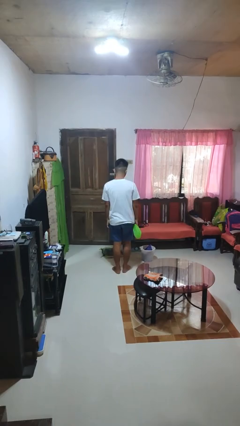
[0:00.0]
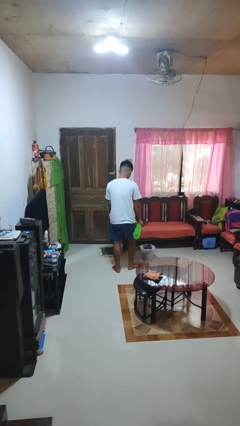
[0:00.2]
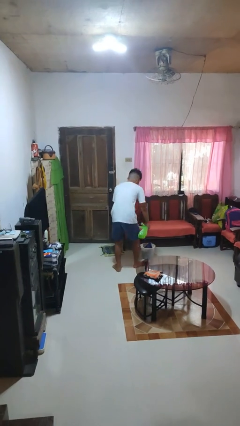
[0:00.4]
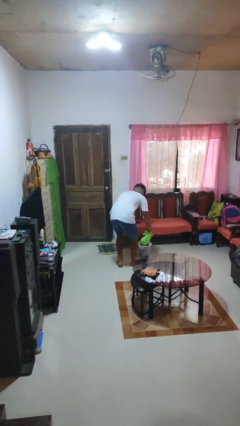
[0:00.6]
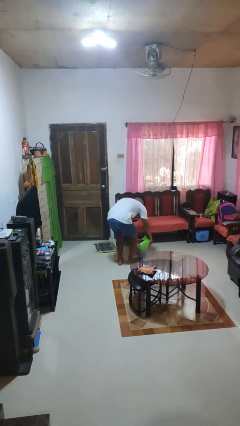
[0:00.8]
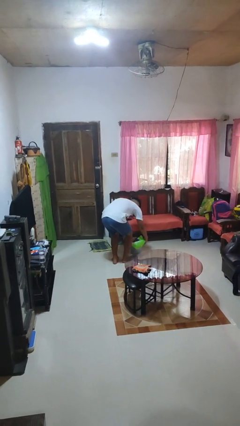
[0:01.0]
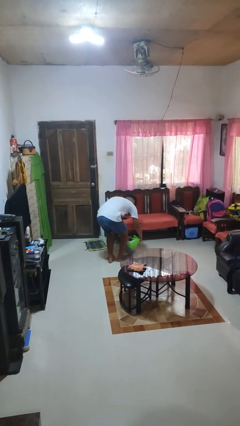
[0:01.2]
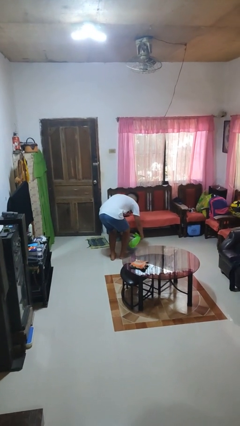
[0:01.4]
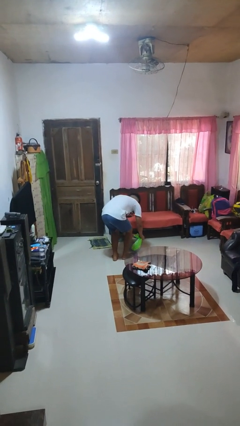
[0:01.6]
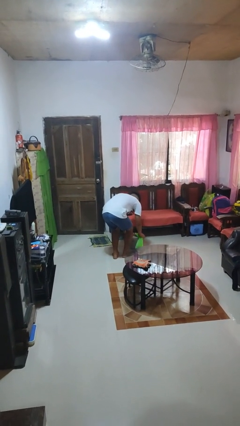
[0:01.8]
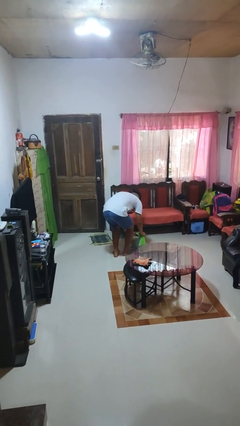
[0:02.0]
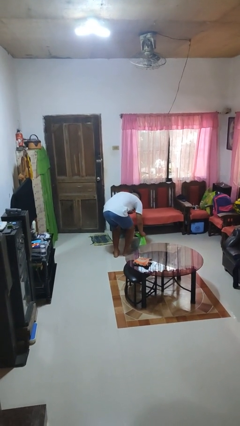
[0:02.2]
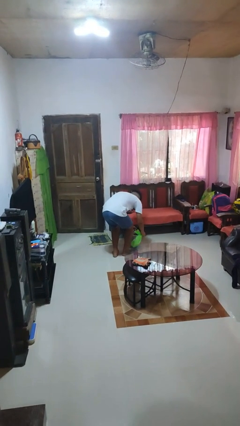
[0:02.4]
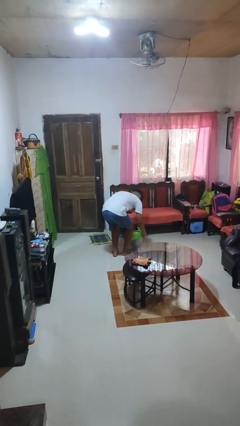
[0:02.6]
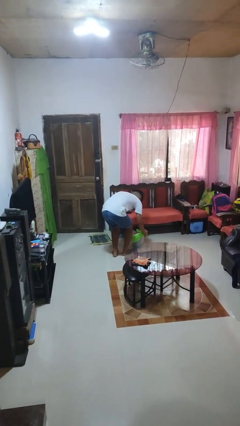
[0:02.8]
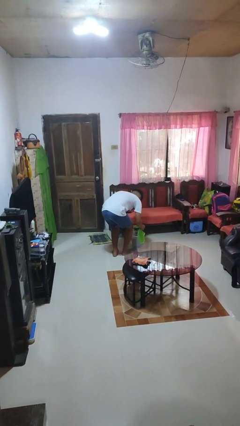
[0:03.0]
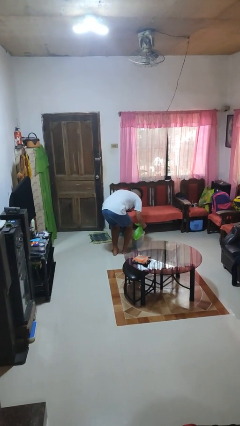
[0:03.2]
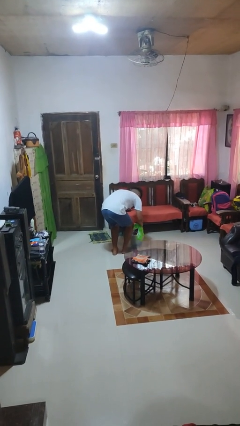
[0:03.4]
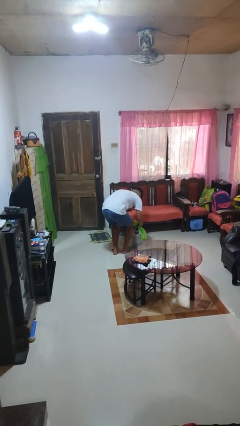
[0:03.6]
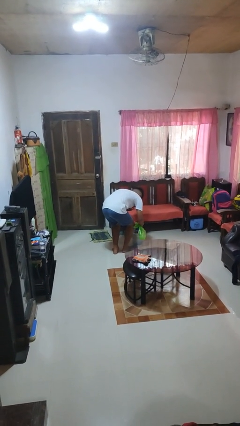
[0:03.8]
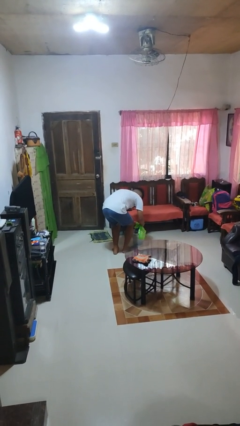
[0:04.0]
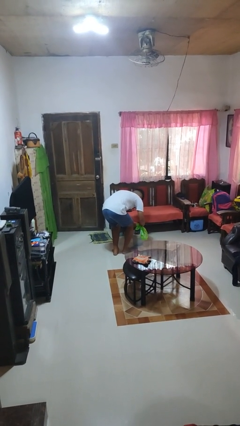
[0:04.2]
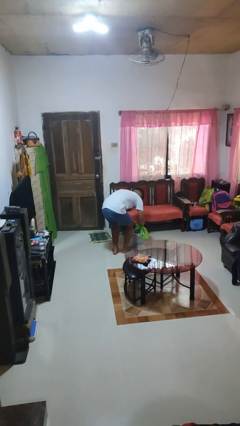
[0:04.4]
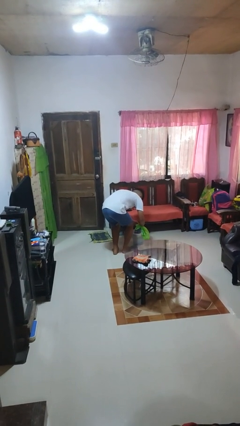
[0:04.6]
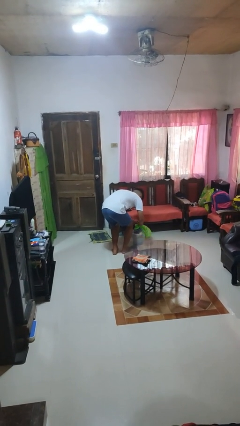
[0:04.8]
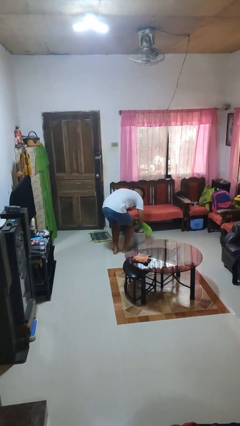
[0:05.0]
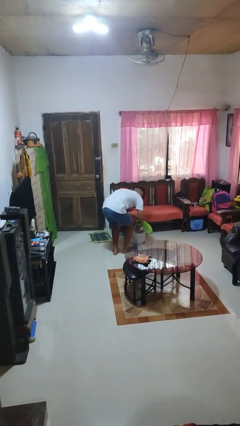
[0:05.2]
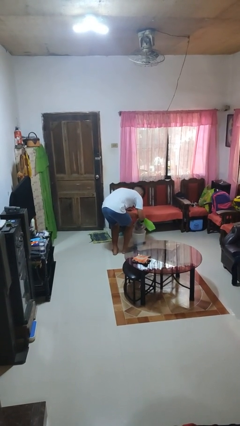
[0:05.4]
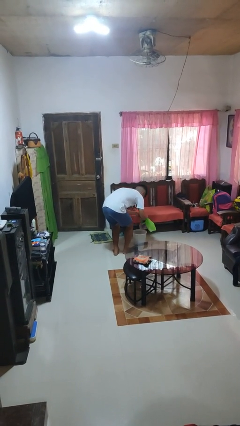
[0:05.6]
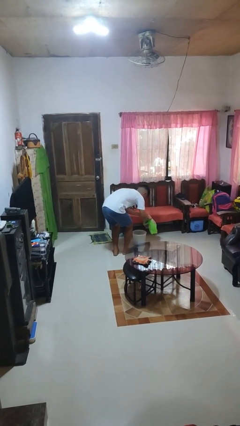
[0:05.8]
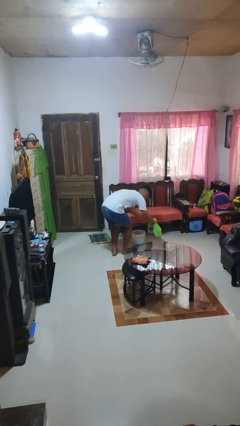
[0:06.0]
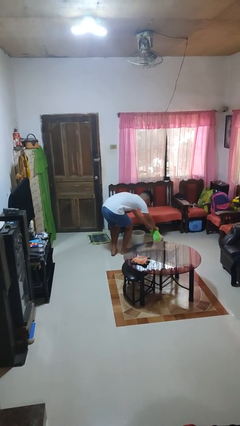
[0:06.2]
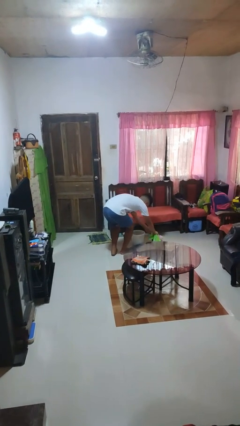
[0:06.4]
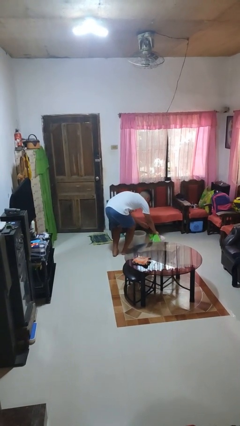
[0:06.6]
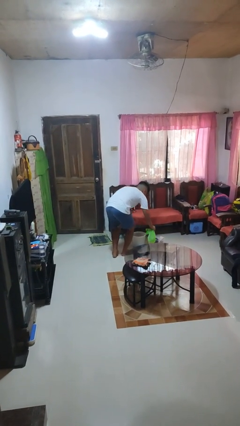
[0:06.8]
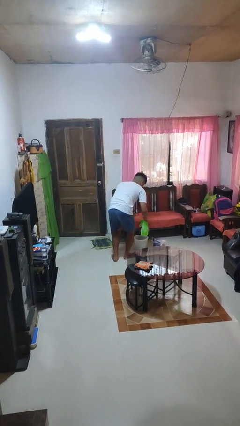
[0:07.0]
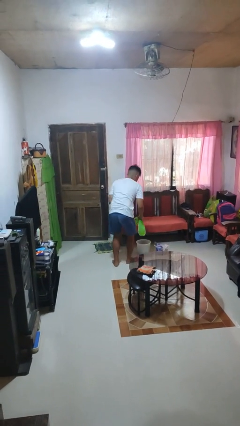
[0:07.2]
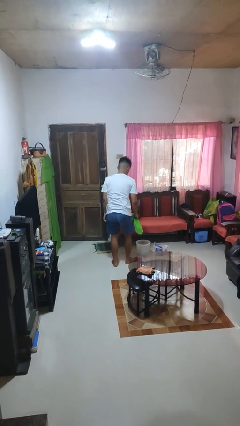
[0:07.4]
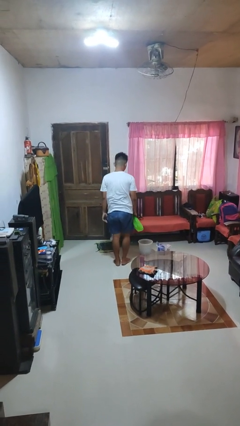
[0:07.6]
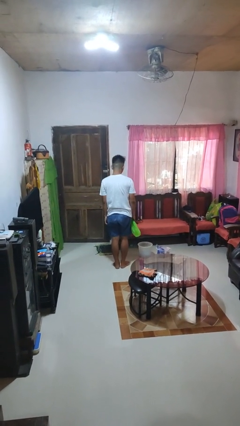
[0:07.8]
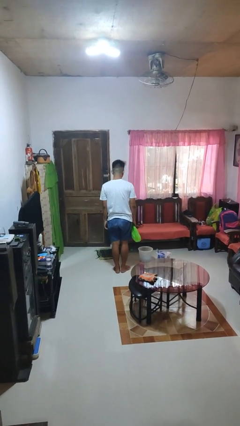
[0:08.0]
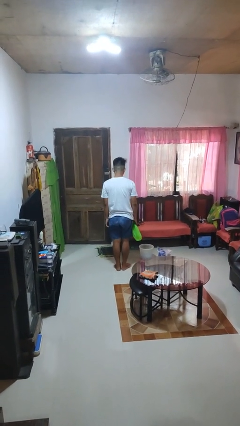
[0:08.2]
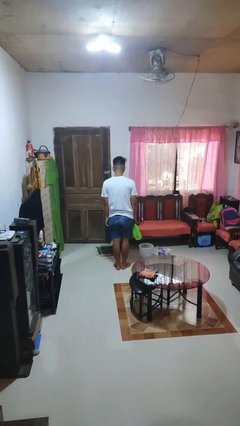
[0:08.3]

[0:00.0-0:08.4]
person removes trashbag from trashcan

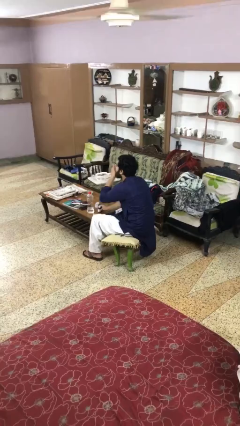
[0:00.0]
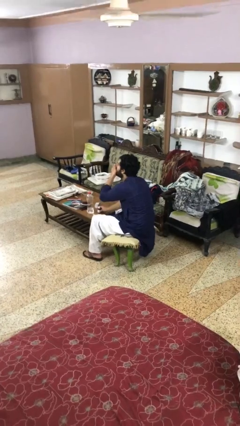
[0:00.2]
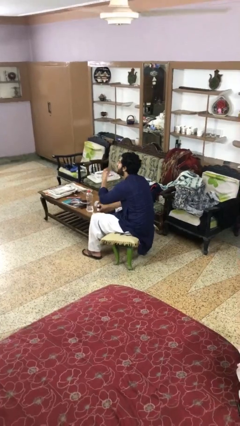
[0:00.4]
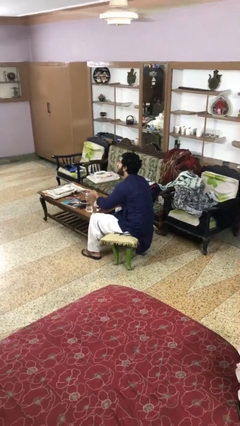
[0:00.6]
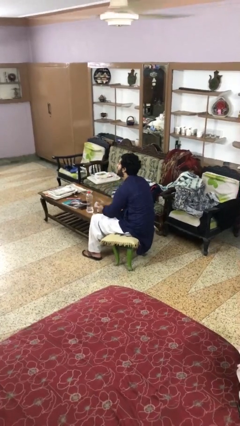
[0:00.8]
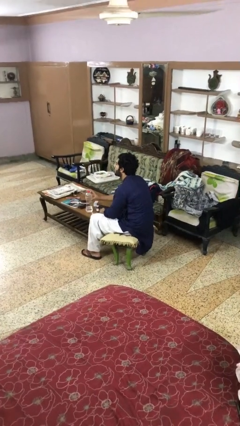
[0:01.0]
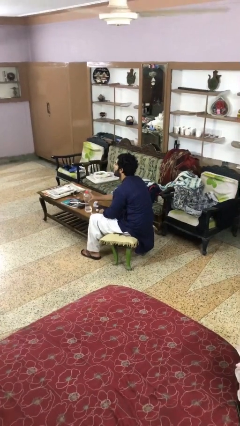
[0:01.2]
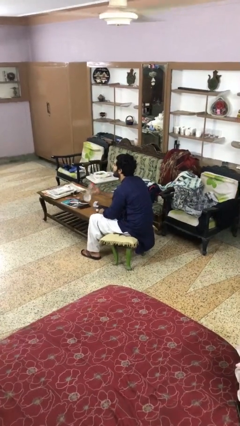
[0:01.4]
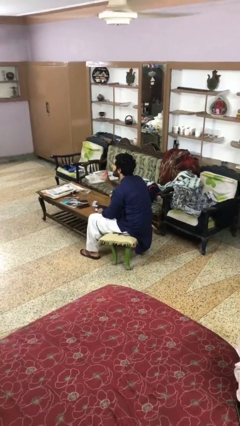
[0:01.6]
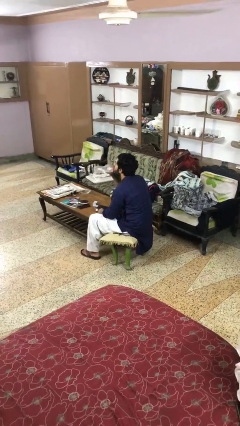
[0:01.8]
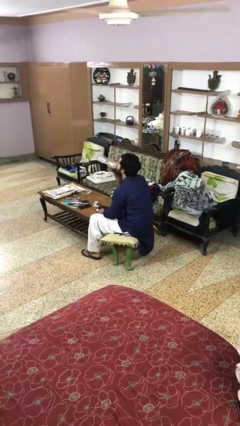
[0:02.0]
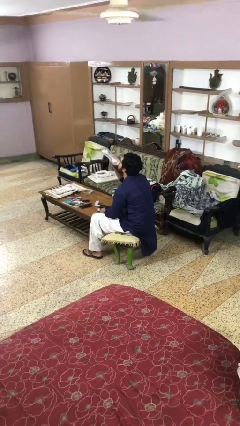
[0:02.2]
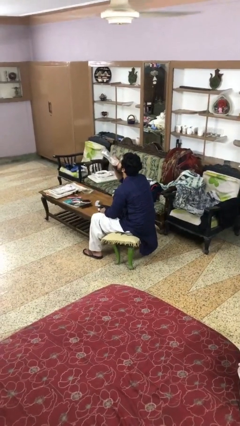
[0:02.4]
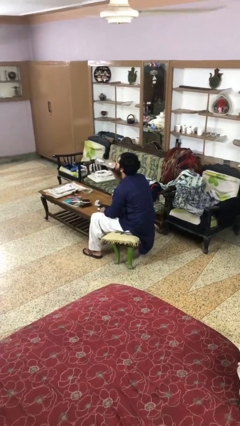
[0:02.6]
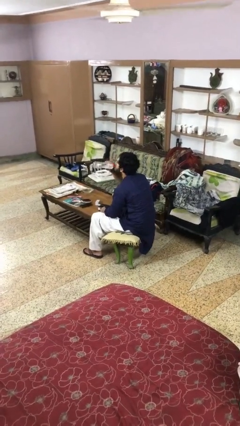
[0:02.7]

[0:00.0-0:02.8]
person drinks from cup

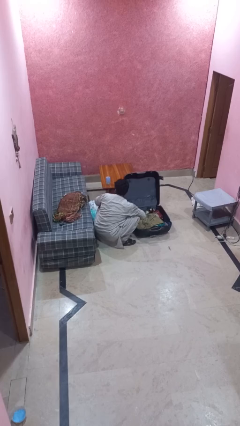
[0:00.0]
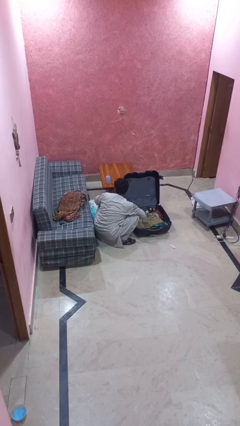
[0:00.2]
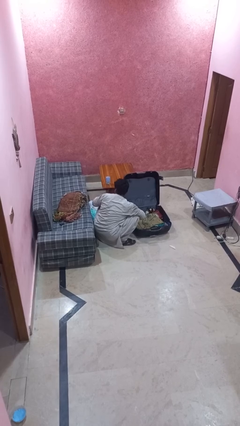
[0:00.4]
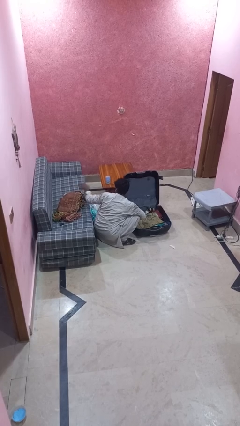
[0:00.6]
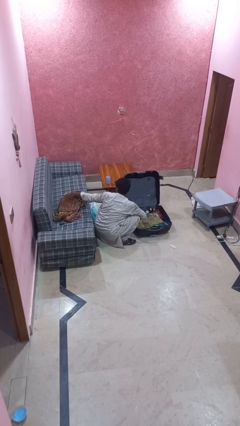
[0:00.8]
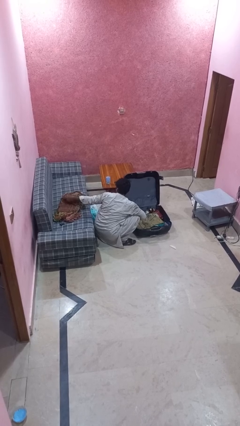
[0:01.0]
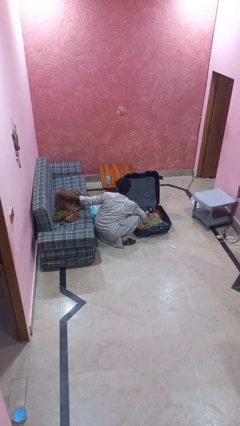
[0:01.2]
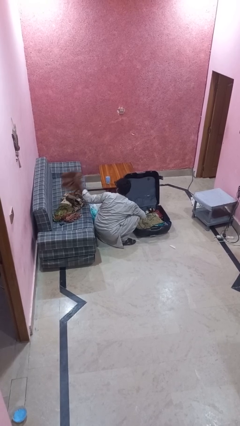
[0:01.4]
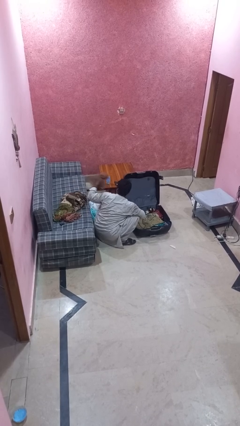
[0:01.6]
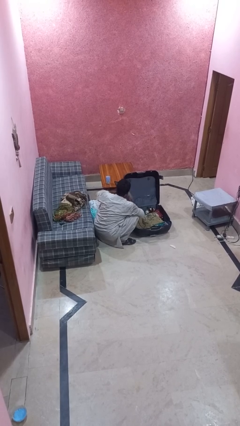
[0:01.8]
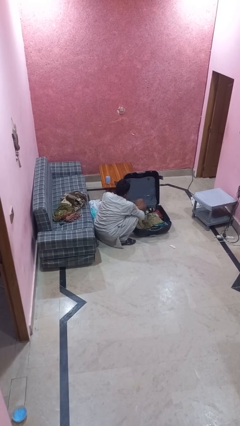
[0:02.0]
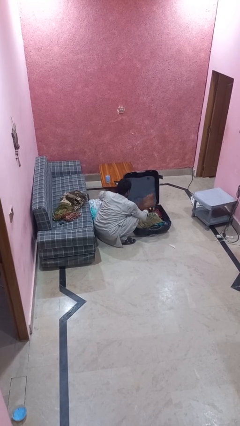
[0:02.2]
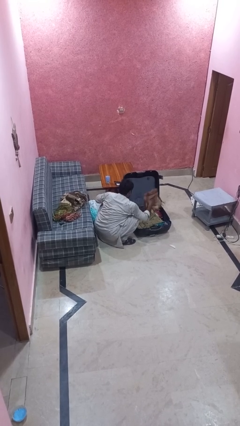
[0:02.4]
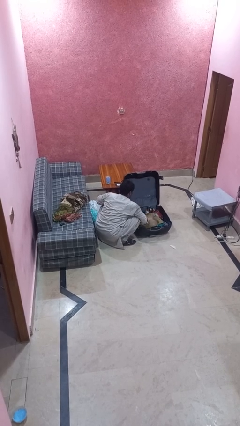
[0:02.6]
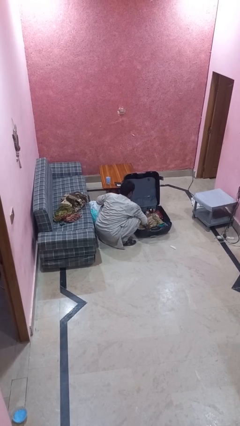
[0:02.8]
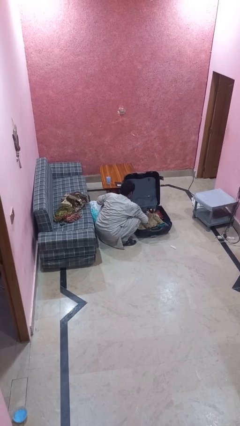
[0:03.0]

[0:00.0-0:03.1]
person loads clothes into suitcase

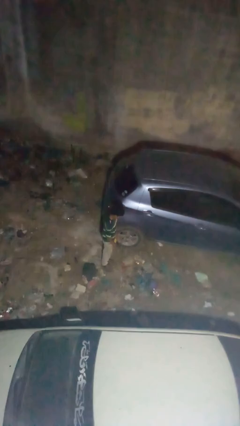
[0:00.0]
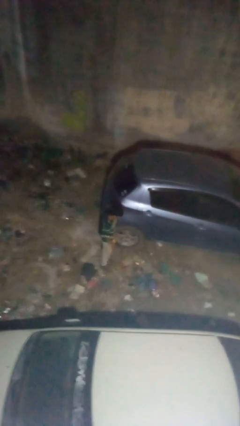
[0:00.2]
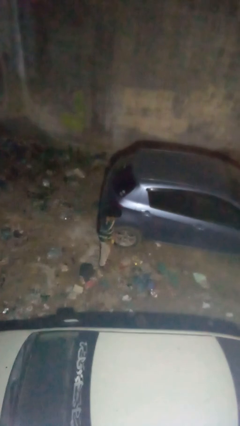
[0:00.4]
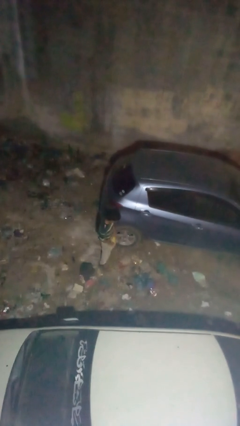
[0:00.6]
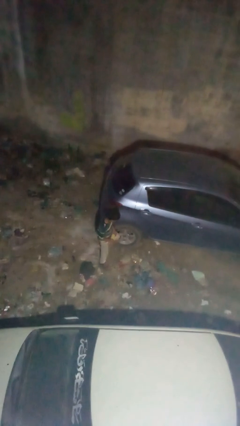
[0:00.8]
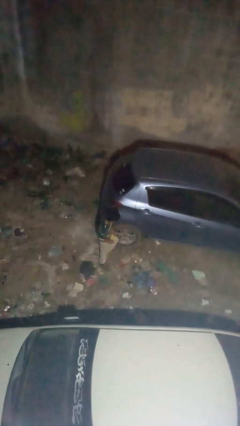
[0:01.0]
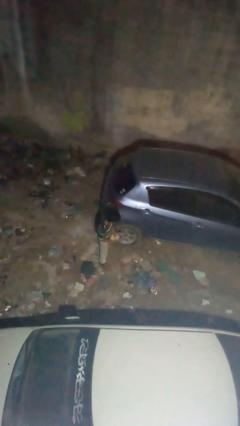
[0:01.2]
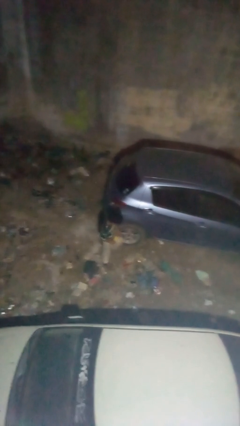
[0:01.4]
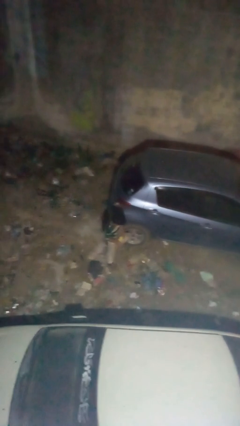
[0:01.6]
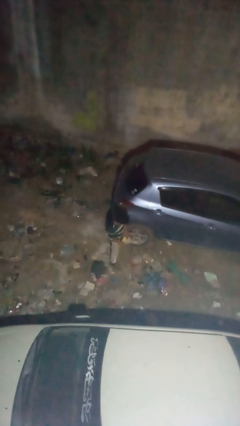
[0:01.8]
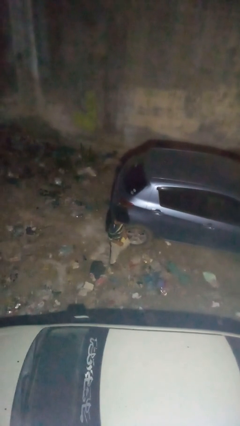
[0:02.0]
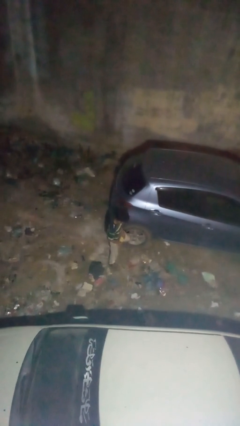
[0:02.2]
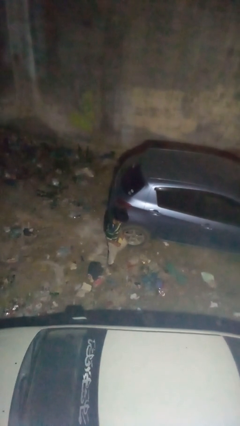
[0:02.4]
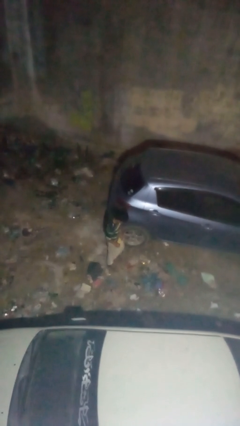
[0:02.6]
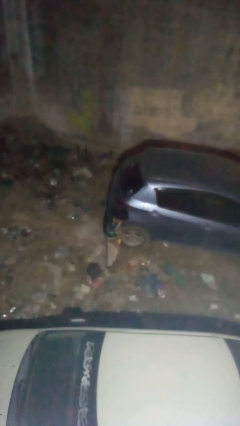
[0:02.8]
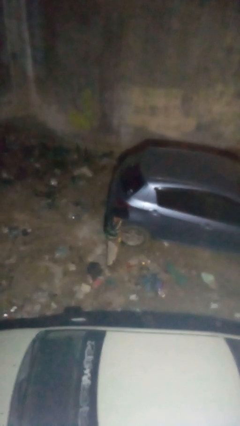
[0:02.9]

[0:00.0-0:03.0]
person kicks car tires

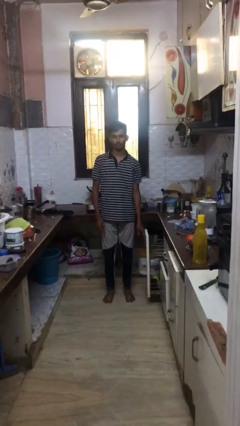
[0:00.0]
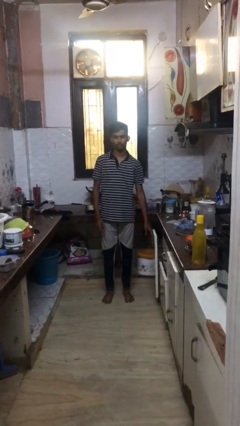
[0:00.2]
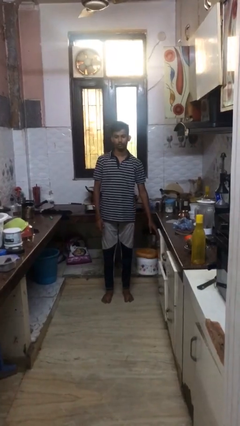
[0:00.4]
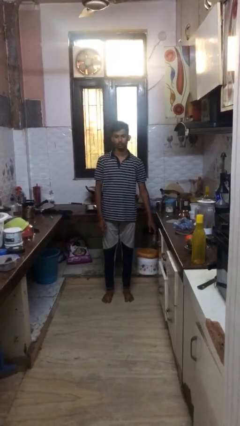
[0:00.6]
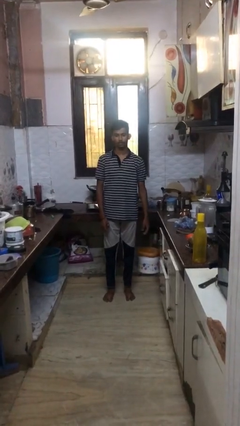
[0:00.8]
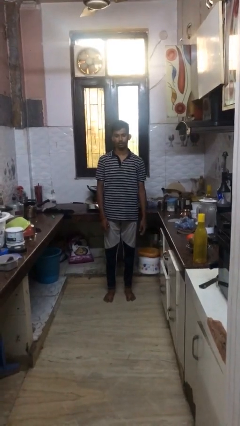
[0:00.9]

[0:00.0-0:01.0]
person closes dishwasher
